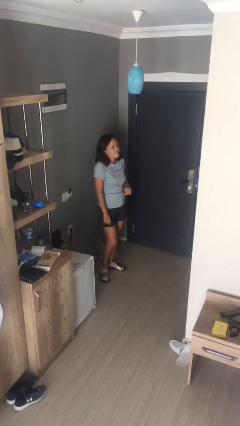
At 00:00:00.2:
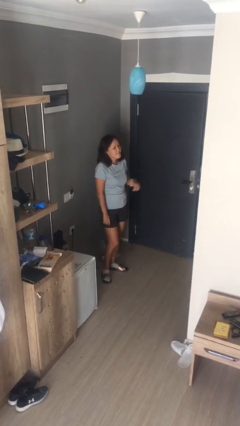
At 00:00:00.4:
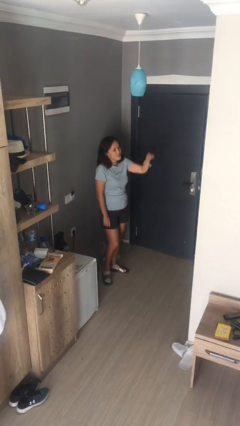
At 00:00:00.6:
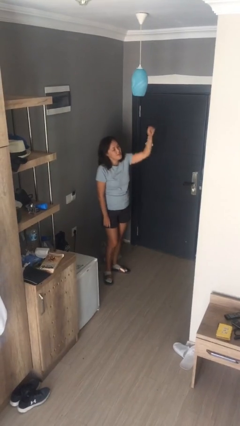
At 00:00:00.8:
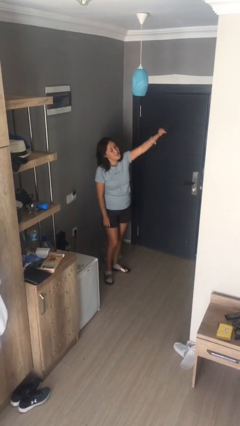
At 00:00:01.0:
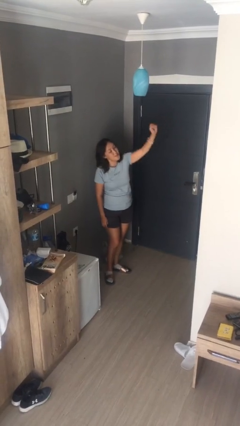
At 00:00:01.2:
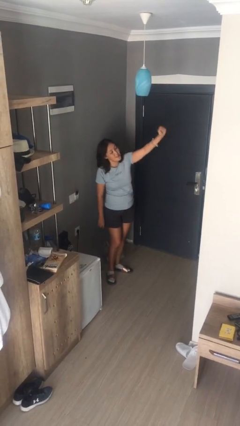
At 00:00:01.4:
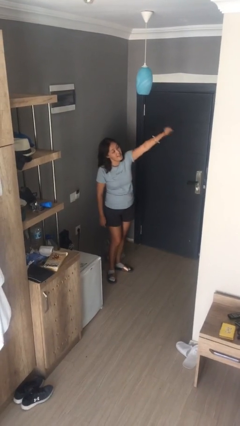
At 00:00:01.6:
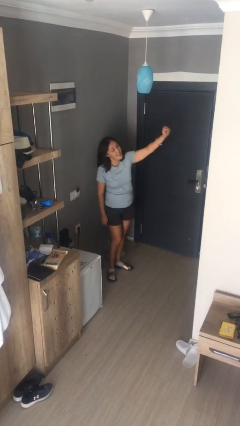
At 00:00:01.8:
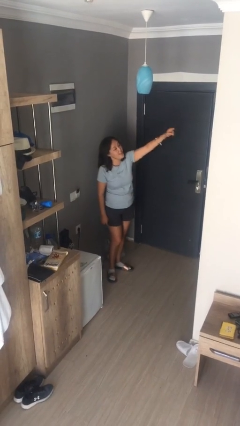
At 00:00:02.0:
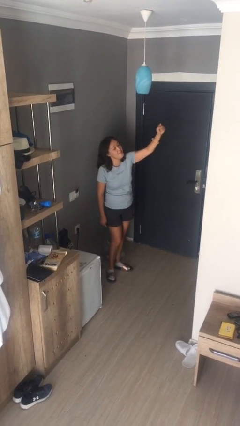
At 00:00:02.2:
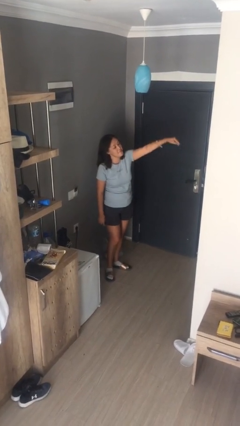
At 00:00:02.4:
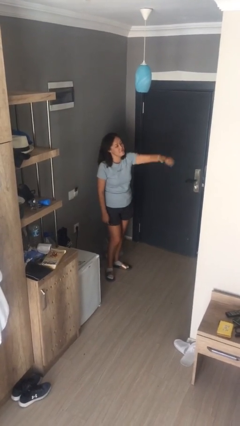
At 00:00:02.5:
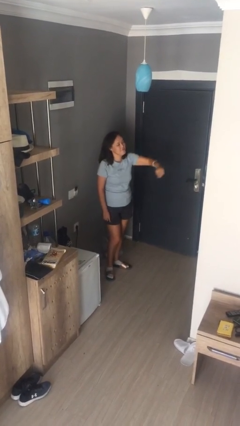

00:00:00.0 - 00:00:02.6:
person points at person

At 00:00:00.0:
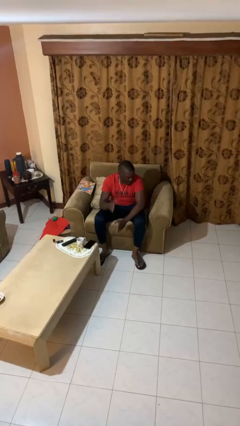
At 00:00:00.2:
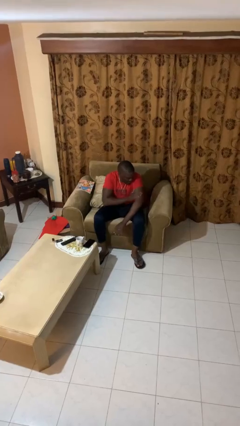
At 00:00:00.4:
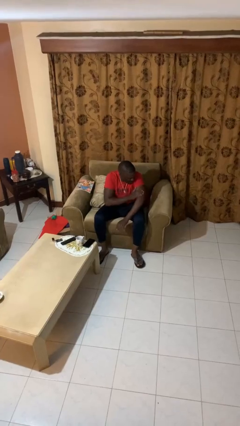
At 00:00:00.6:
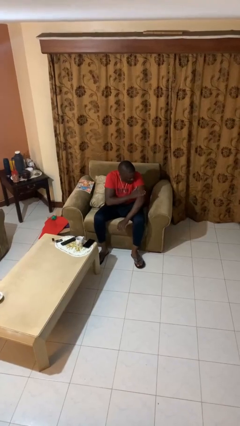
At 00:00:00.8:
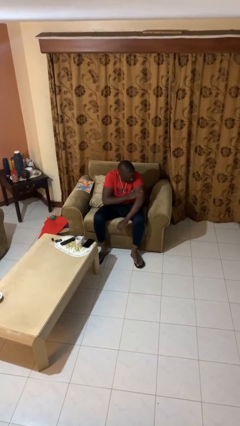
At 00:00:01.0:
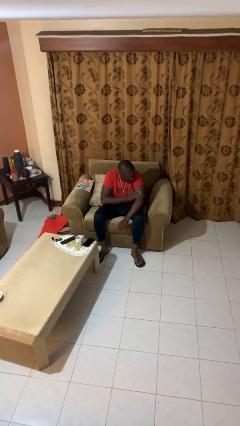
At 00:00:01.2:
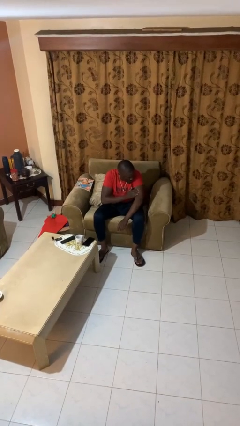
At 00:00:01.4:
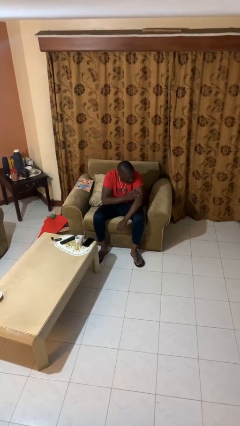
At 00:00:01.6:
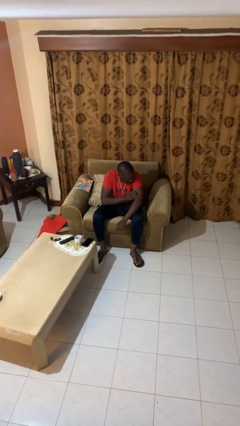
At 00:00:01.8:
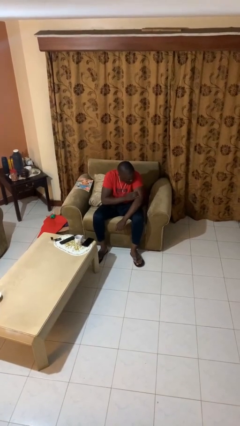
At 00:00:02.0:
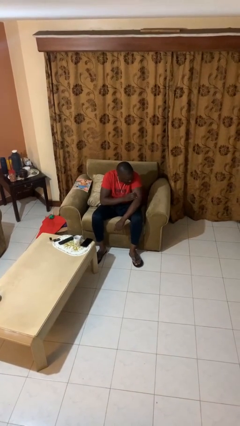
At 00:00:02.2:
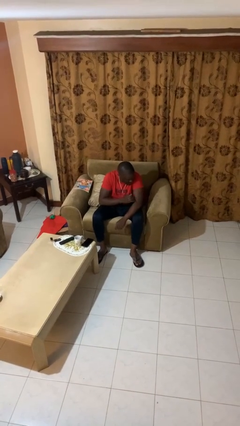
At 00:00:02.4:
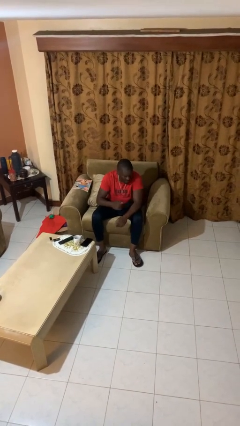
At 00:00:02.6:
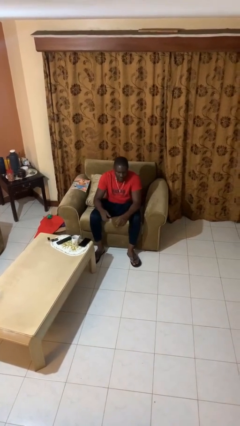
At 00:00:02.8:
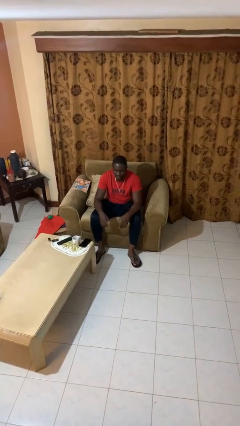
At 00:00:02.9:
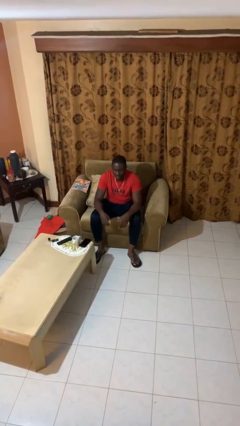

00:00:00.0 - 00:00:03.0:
person swats bug

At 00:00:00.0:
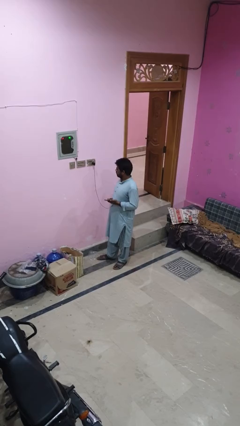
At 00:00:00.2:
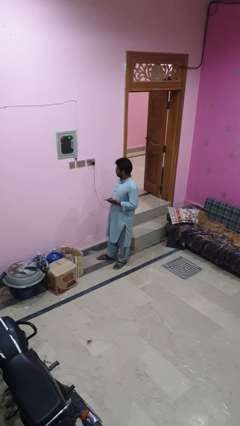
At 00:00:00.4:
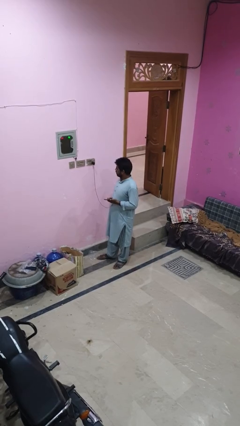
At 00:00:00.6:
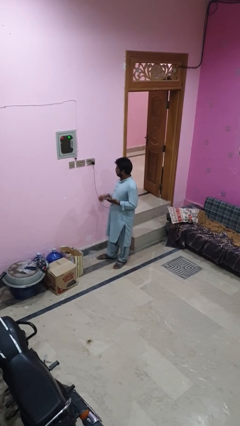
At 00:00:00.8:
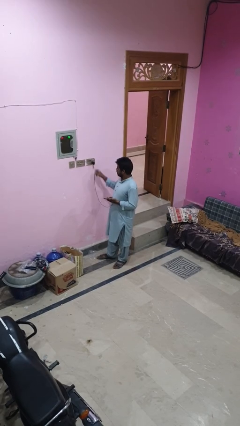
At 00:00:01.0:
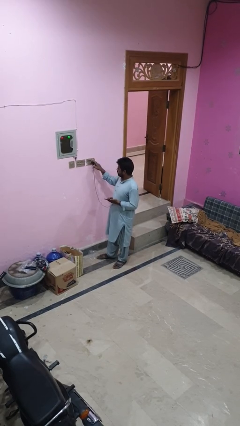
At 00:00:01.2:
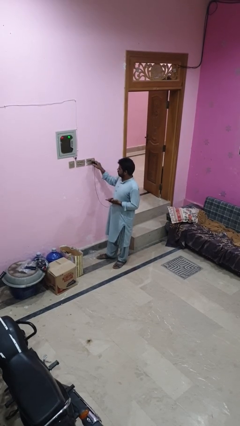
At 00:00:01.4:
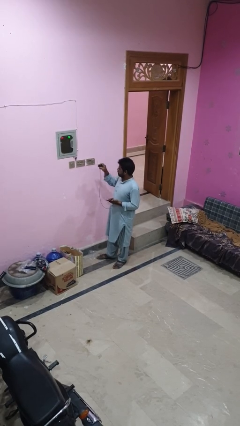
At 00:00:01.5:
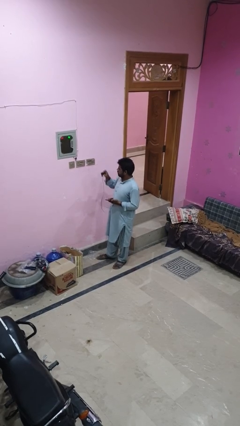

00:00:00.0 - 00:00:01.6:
person unplugs from electrical socket

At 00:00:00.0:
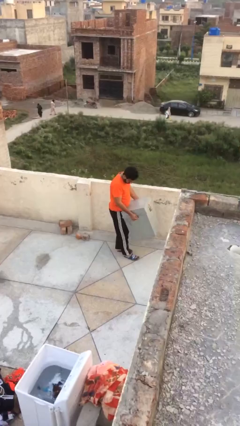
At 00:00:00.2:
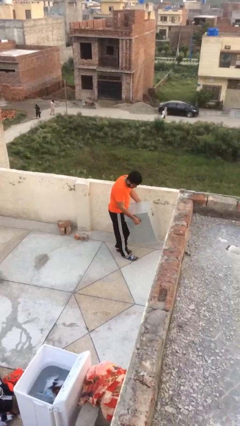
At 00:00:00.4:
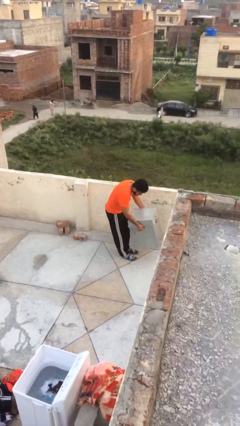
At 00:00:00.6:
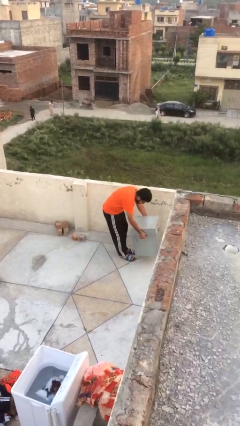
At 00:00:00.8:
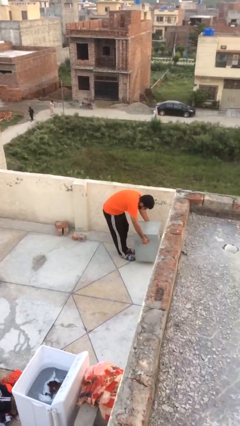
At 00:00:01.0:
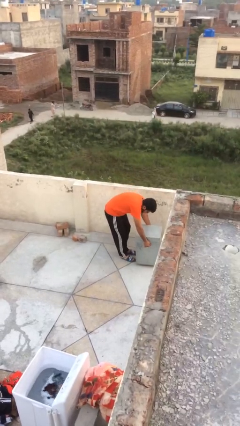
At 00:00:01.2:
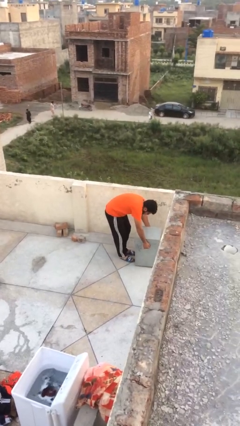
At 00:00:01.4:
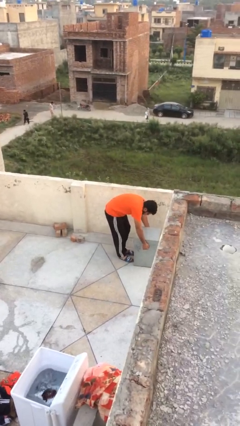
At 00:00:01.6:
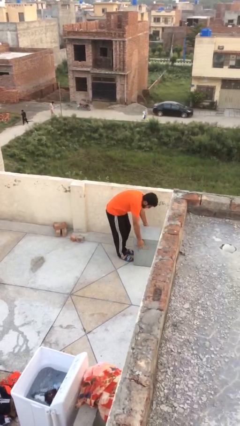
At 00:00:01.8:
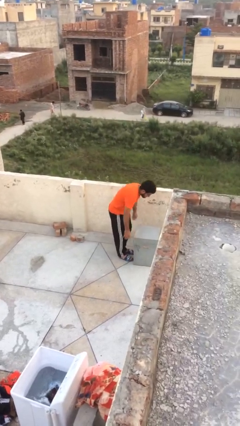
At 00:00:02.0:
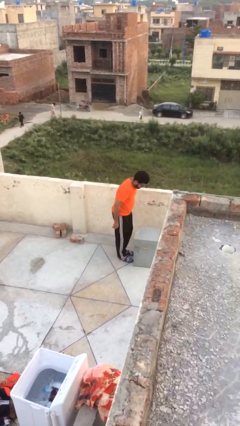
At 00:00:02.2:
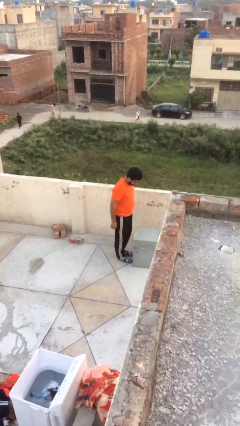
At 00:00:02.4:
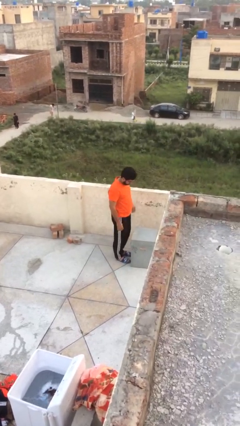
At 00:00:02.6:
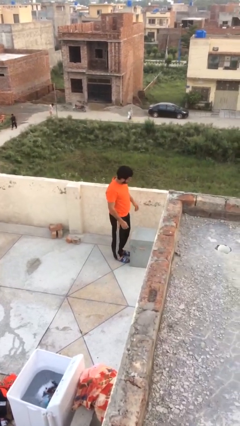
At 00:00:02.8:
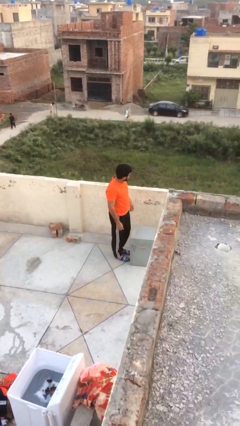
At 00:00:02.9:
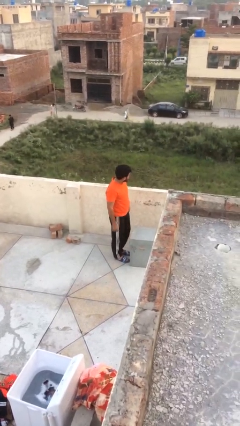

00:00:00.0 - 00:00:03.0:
person puts down object on floor

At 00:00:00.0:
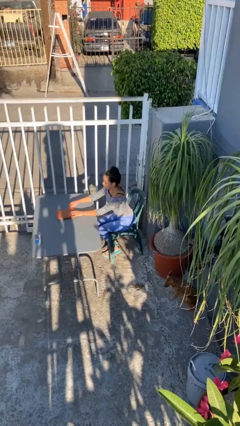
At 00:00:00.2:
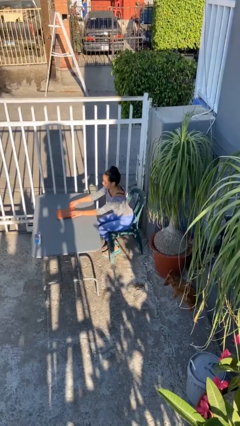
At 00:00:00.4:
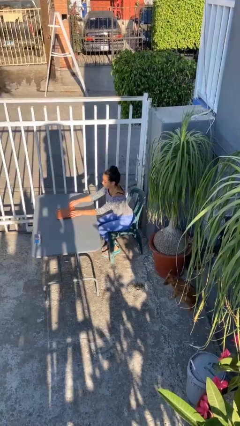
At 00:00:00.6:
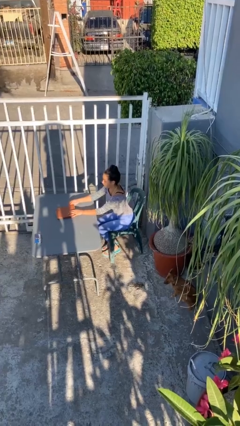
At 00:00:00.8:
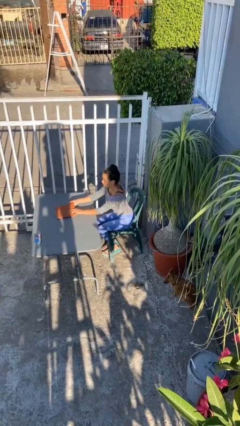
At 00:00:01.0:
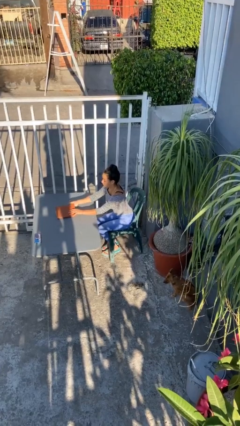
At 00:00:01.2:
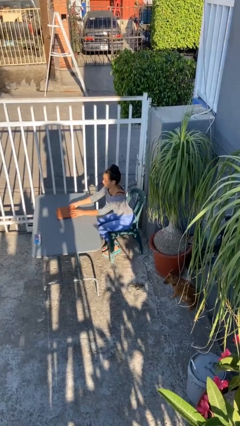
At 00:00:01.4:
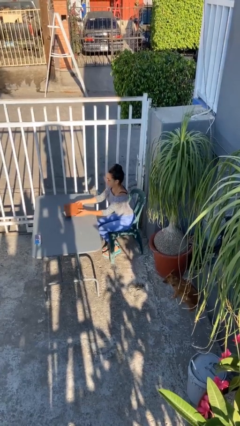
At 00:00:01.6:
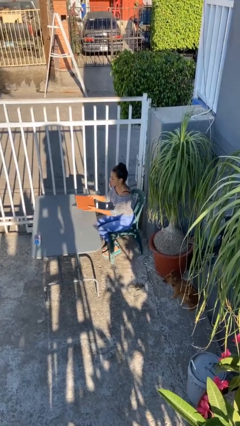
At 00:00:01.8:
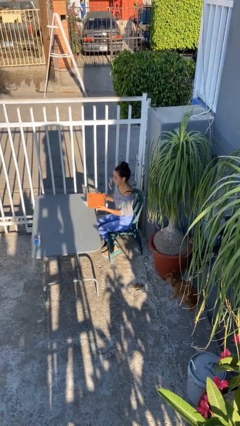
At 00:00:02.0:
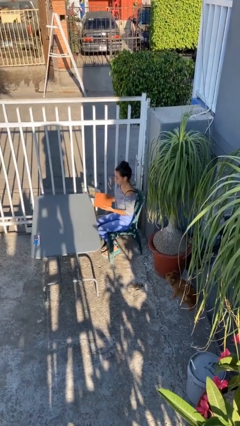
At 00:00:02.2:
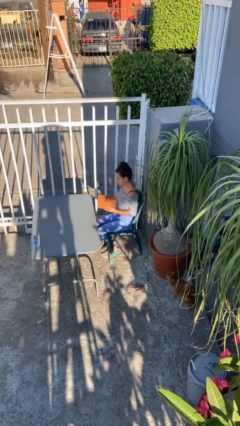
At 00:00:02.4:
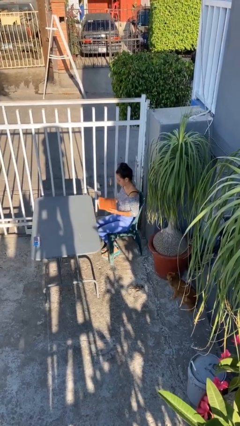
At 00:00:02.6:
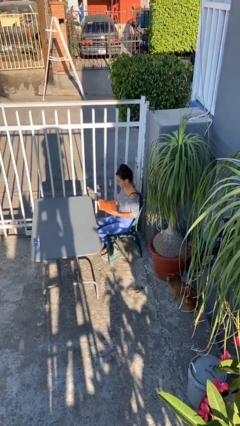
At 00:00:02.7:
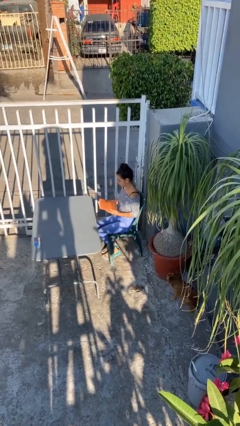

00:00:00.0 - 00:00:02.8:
person picks up object from table

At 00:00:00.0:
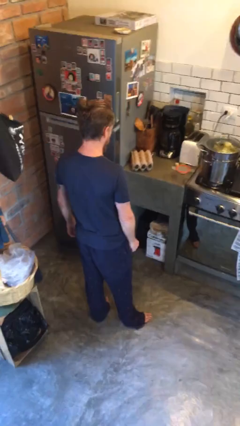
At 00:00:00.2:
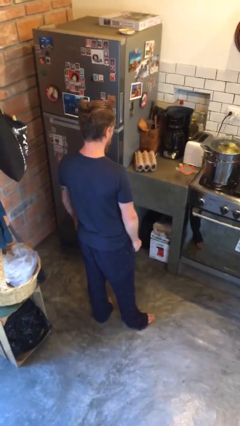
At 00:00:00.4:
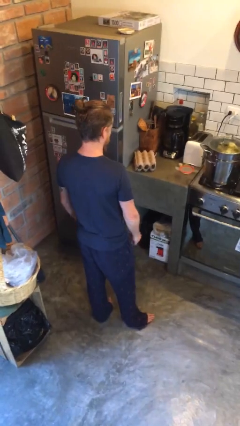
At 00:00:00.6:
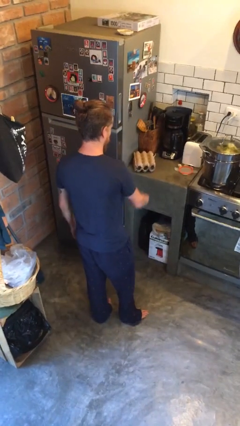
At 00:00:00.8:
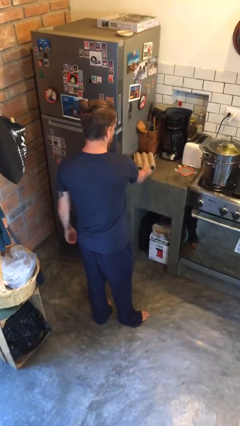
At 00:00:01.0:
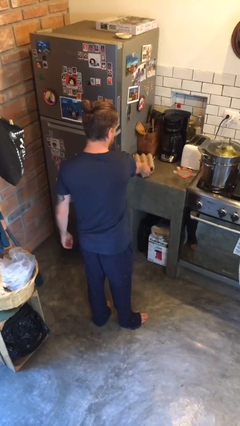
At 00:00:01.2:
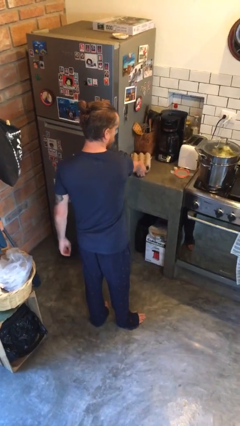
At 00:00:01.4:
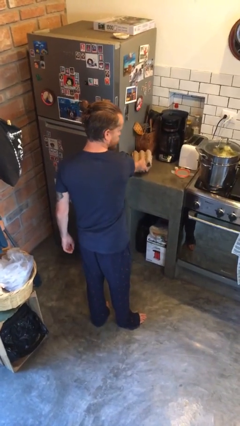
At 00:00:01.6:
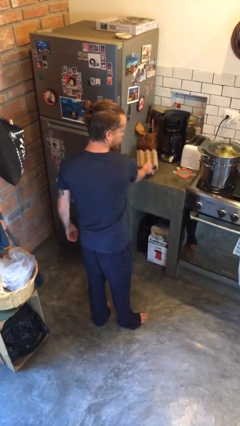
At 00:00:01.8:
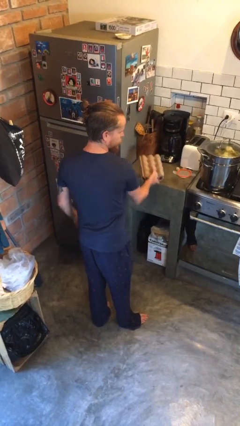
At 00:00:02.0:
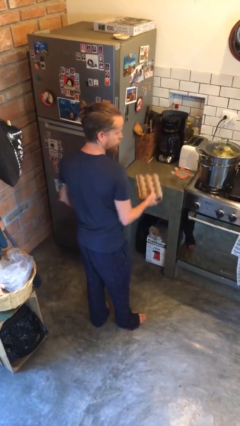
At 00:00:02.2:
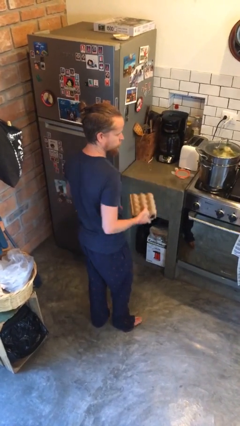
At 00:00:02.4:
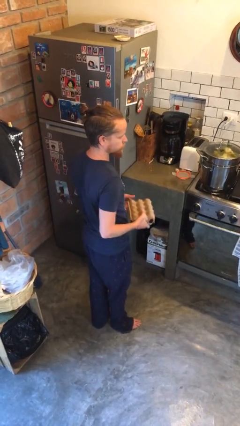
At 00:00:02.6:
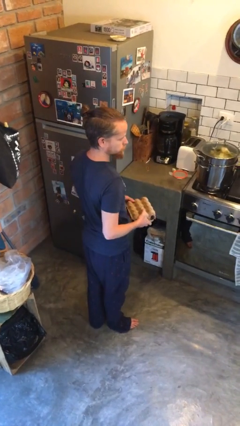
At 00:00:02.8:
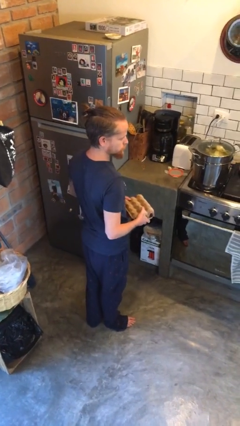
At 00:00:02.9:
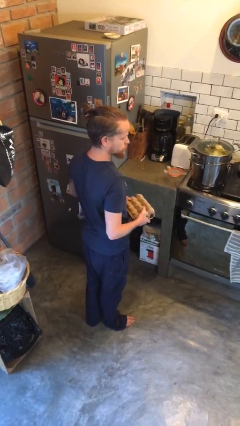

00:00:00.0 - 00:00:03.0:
person picks up object from countertop

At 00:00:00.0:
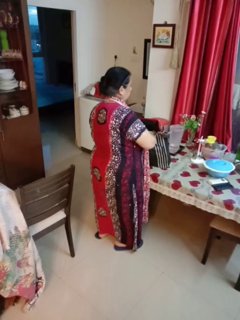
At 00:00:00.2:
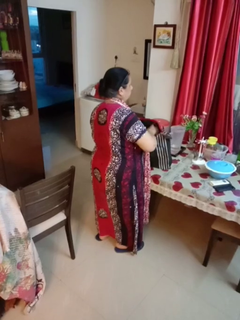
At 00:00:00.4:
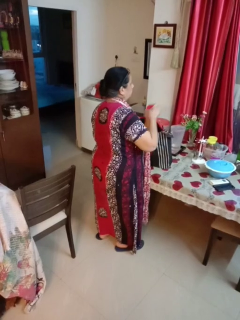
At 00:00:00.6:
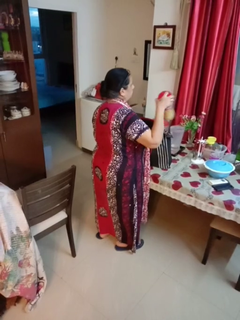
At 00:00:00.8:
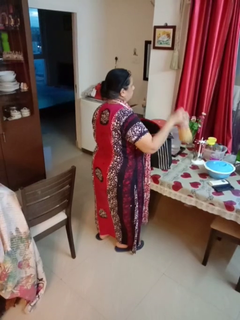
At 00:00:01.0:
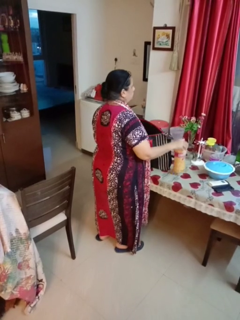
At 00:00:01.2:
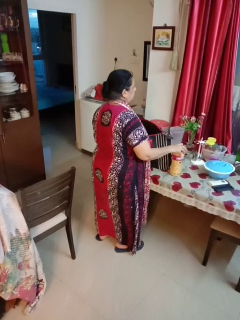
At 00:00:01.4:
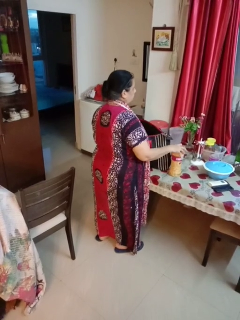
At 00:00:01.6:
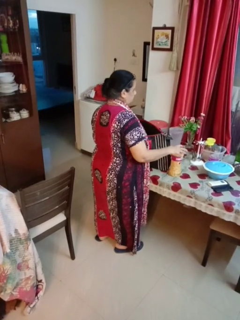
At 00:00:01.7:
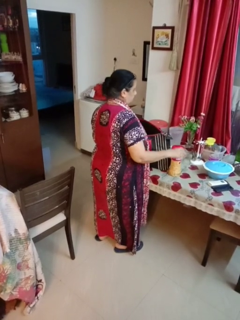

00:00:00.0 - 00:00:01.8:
person takes object from bag
